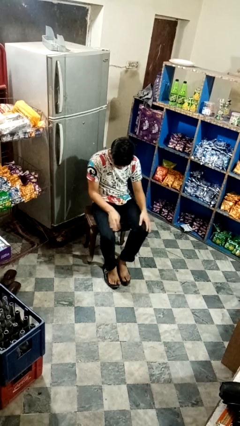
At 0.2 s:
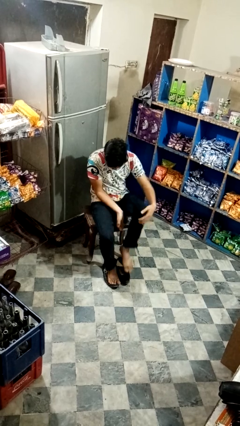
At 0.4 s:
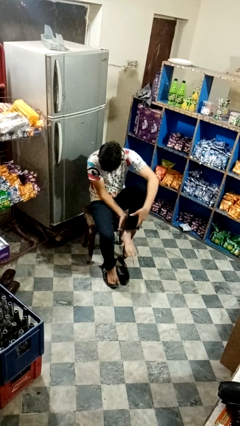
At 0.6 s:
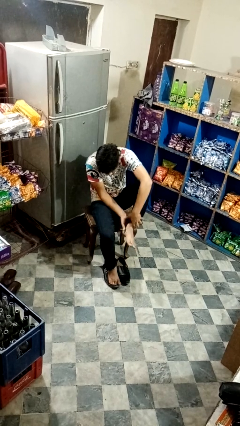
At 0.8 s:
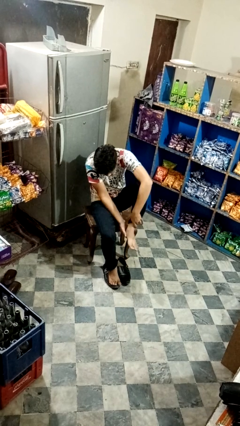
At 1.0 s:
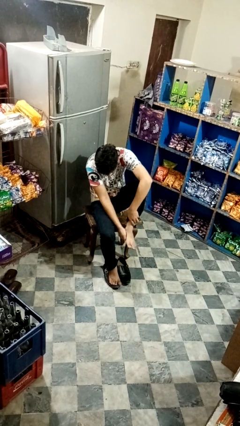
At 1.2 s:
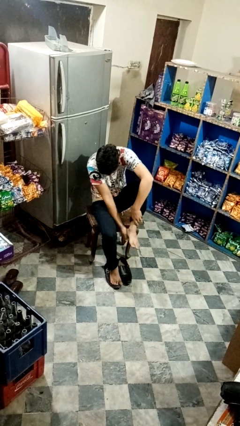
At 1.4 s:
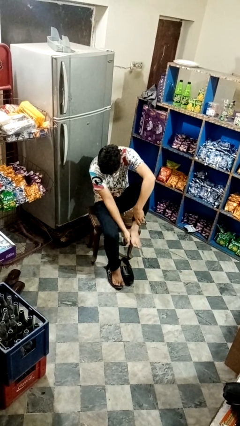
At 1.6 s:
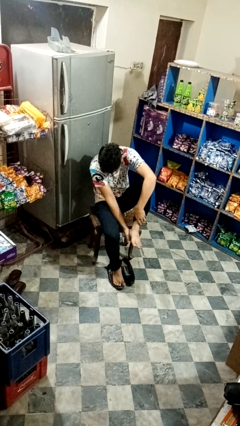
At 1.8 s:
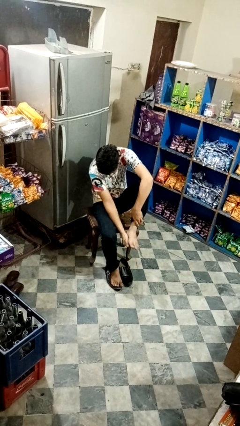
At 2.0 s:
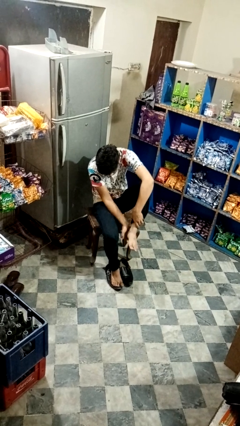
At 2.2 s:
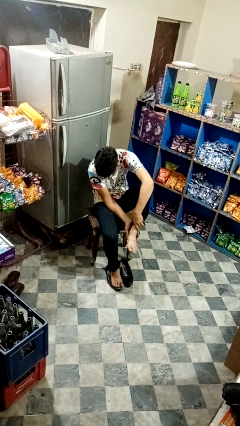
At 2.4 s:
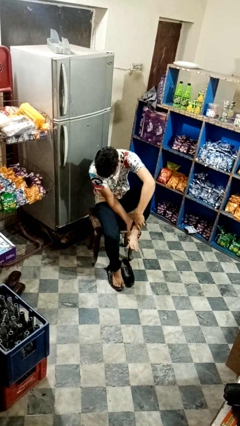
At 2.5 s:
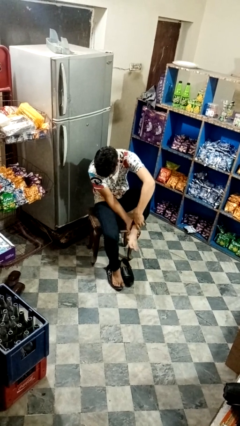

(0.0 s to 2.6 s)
person rubs foot

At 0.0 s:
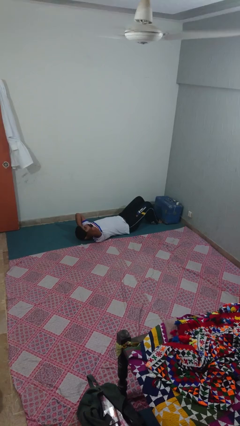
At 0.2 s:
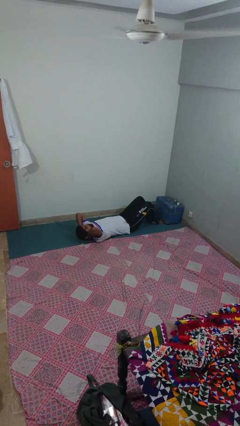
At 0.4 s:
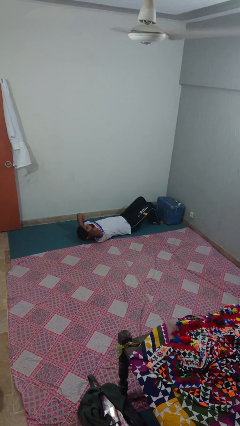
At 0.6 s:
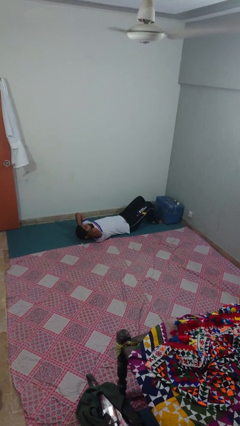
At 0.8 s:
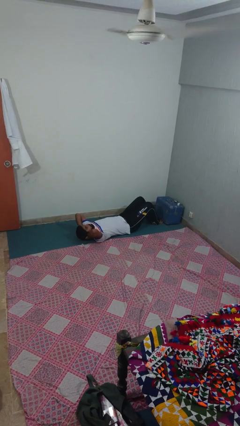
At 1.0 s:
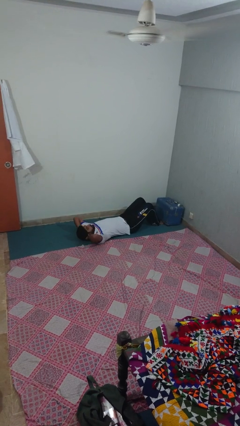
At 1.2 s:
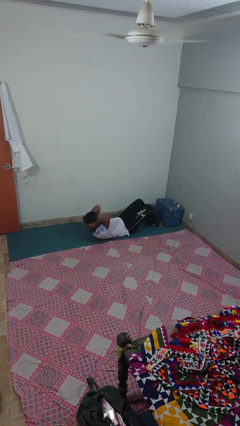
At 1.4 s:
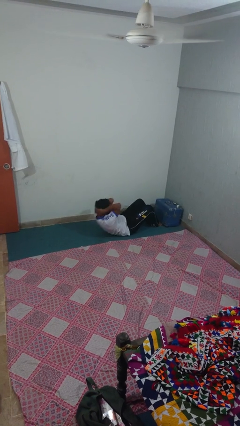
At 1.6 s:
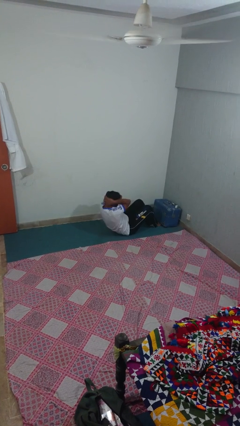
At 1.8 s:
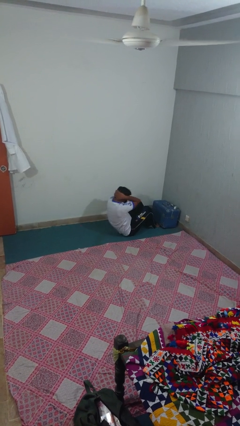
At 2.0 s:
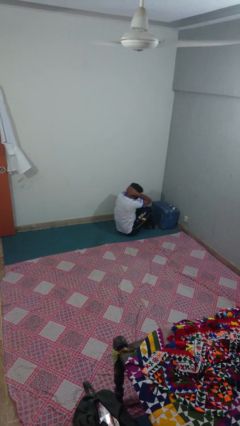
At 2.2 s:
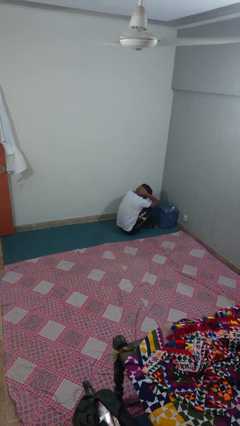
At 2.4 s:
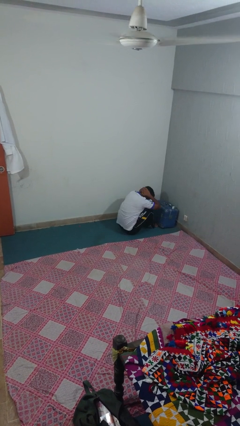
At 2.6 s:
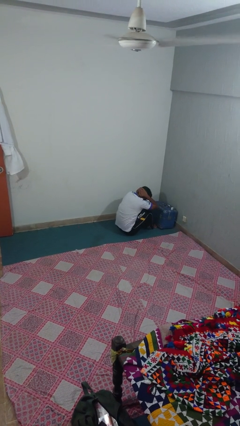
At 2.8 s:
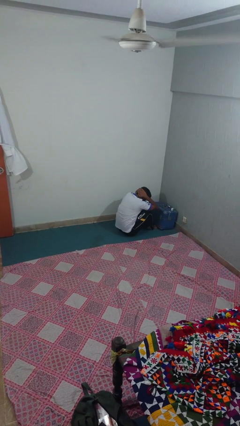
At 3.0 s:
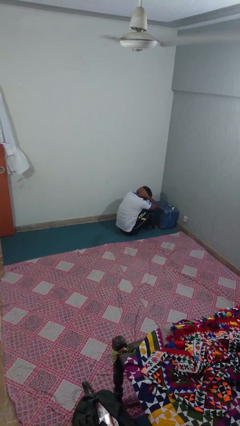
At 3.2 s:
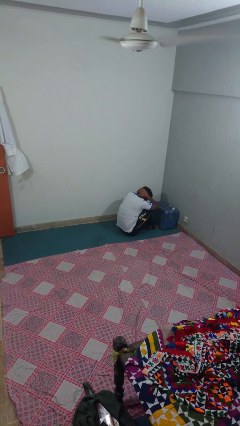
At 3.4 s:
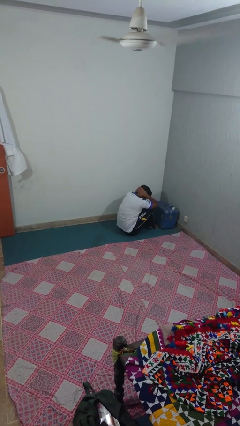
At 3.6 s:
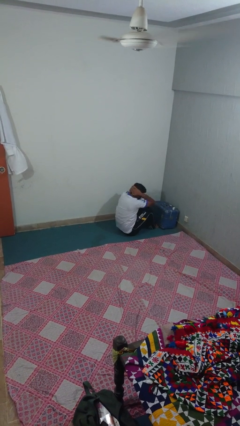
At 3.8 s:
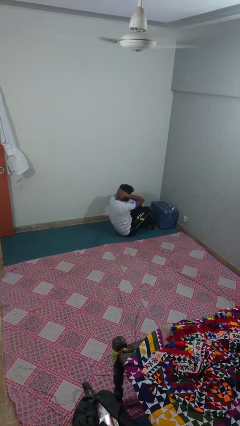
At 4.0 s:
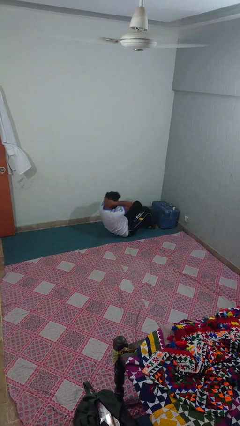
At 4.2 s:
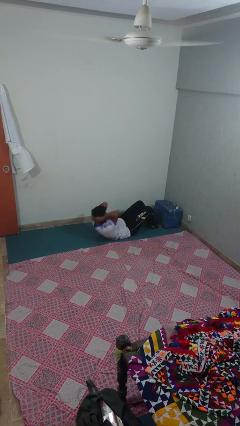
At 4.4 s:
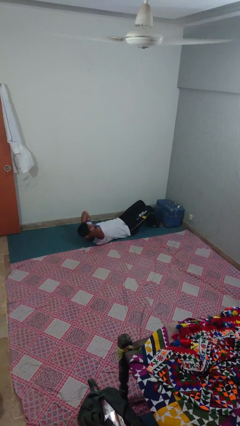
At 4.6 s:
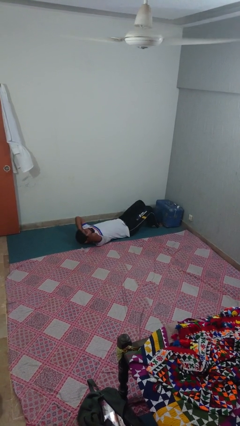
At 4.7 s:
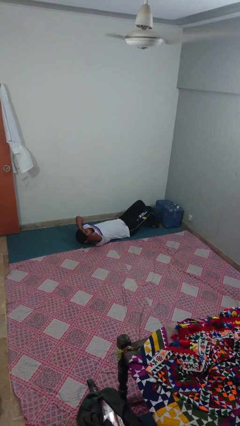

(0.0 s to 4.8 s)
person exercises with situp

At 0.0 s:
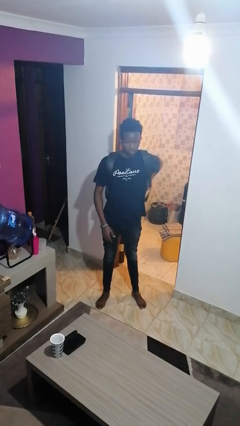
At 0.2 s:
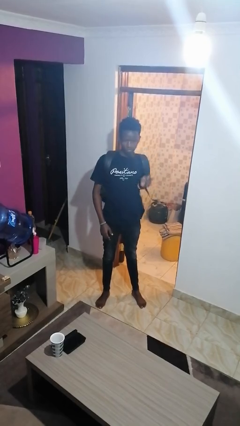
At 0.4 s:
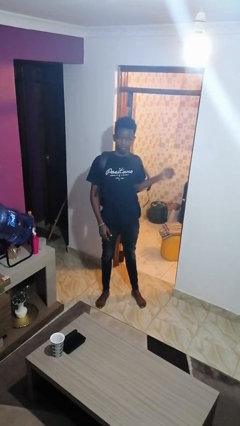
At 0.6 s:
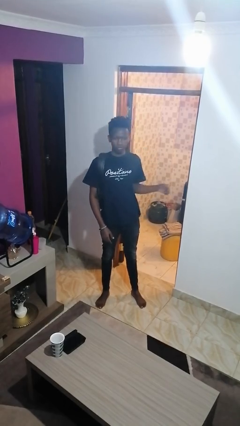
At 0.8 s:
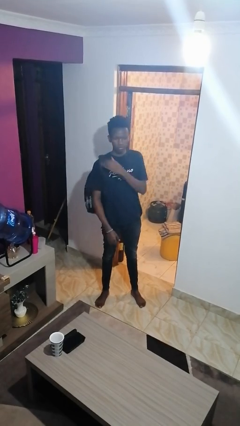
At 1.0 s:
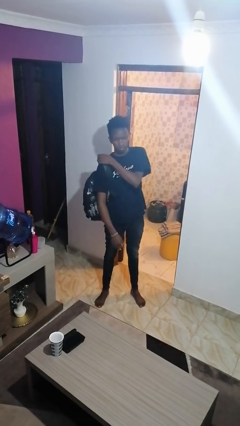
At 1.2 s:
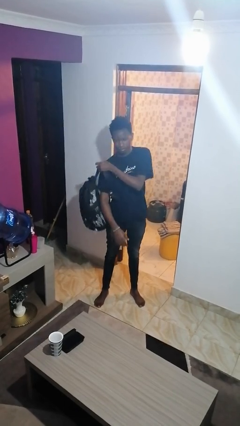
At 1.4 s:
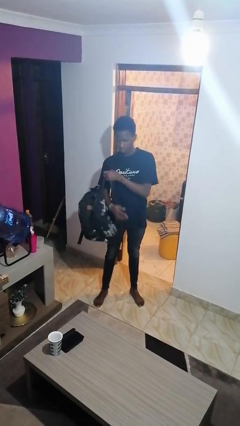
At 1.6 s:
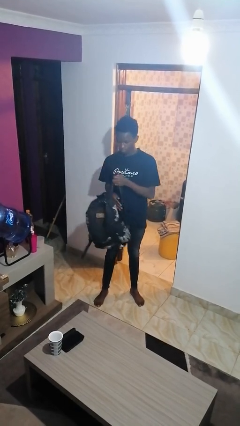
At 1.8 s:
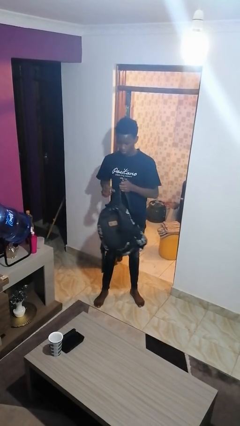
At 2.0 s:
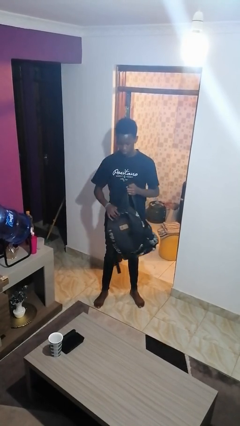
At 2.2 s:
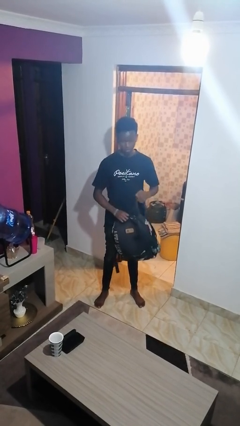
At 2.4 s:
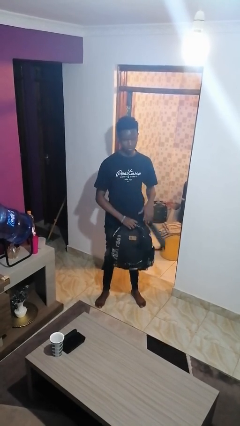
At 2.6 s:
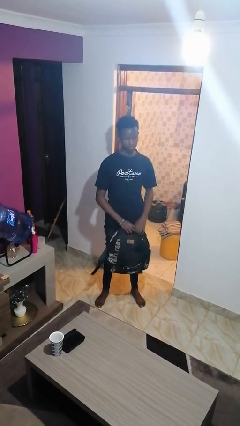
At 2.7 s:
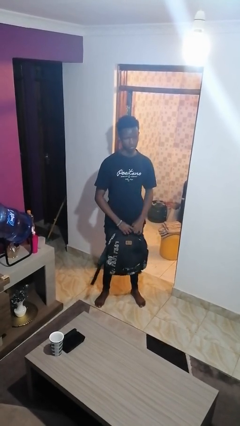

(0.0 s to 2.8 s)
person takes off backpack

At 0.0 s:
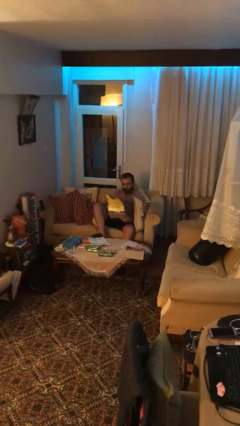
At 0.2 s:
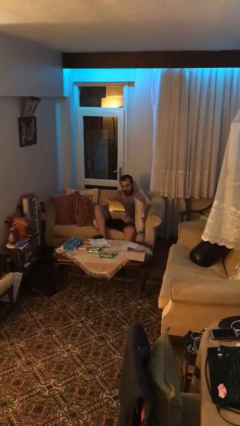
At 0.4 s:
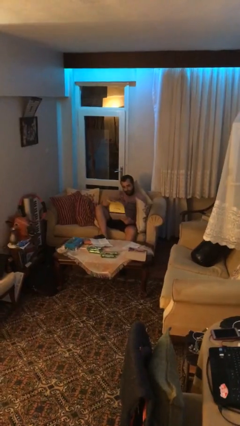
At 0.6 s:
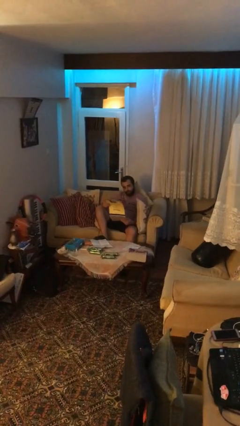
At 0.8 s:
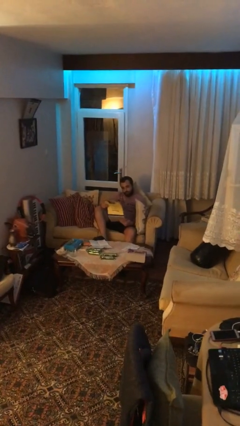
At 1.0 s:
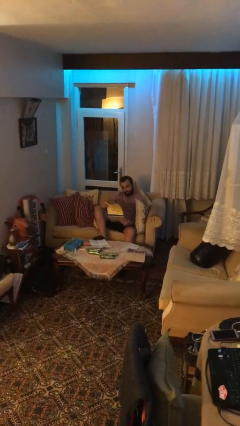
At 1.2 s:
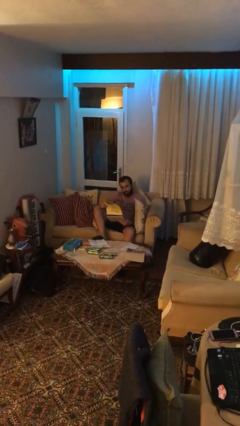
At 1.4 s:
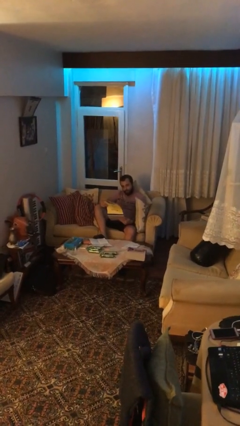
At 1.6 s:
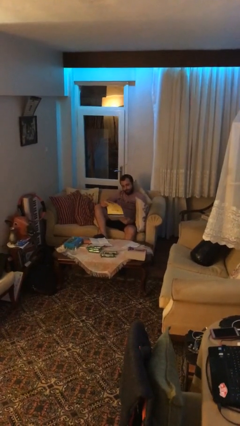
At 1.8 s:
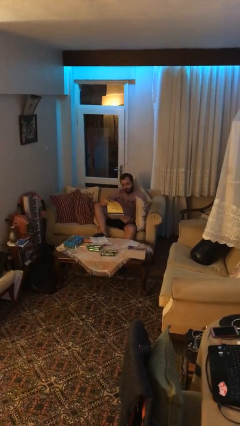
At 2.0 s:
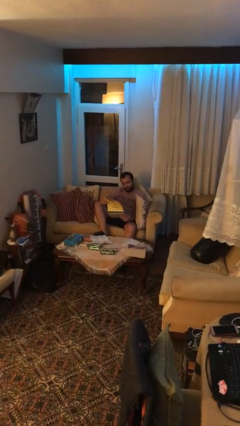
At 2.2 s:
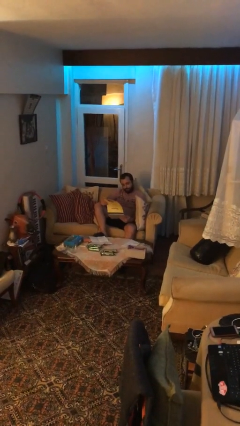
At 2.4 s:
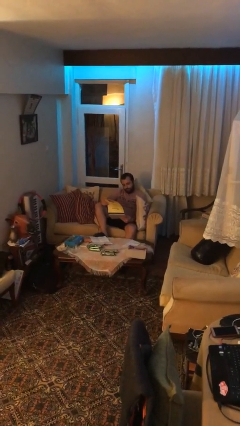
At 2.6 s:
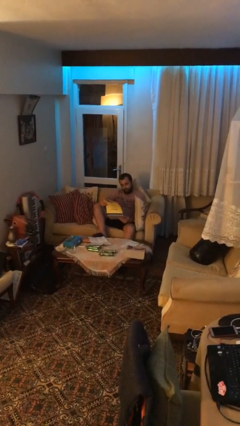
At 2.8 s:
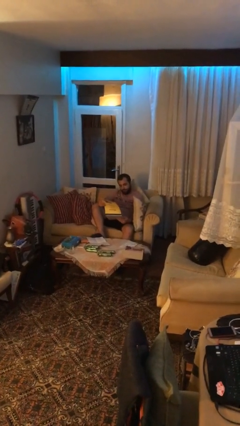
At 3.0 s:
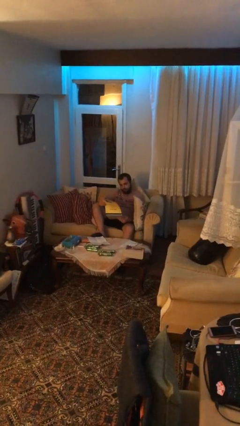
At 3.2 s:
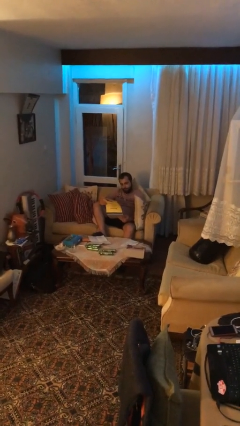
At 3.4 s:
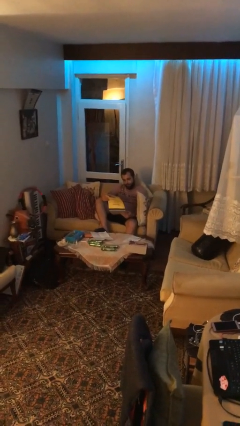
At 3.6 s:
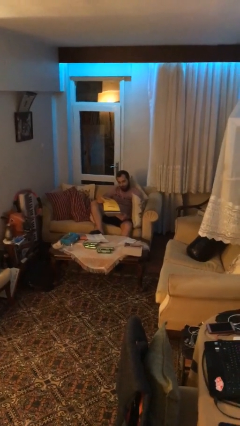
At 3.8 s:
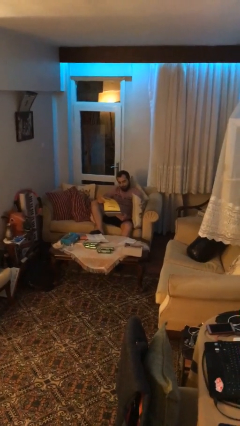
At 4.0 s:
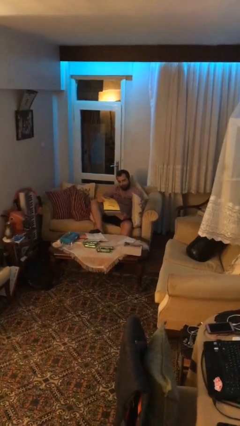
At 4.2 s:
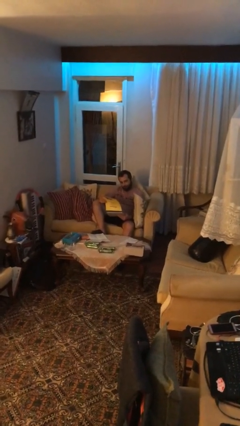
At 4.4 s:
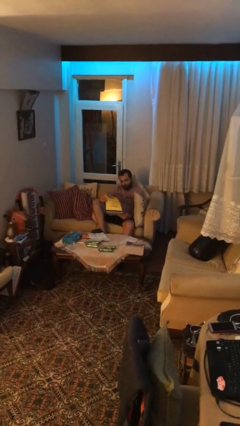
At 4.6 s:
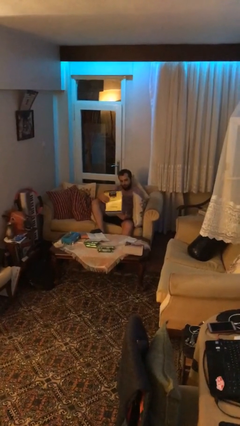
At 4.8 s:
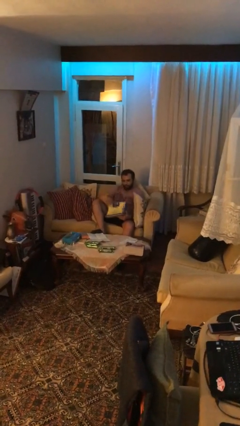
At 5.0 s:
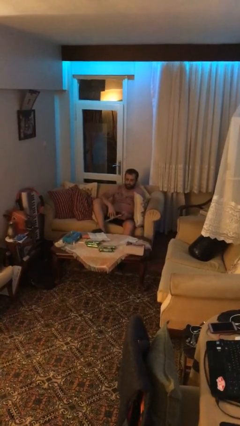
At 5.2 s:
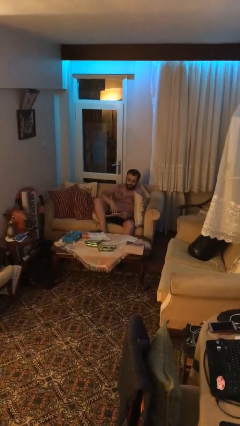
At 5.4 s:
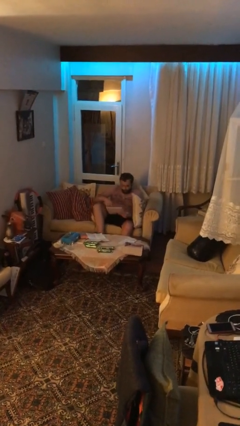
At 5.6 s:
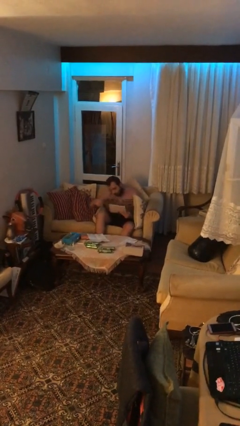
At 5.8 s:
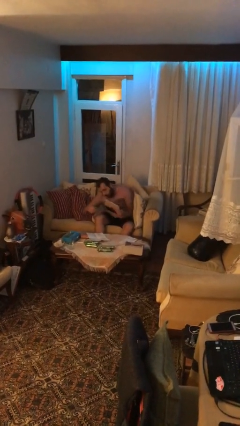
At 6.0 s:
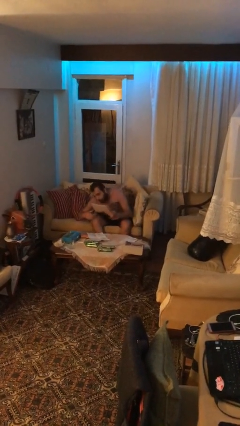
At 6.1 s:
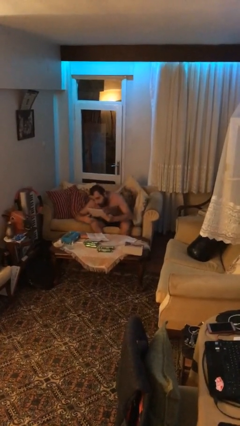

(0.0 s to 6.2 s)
person reads document

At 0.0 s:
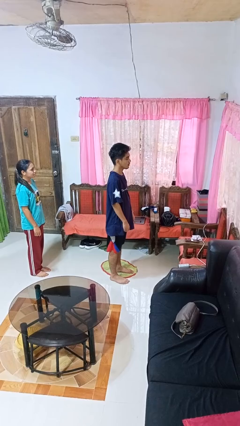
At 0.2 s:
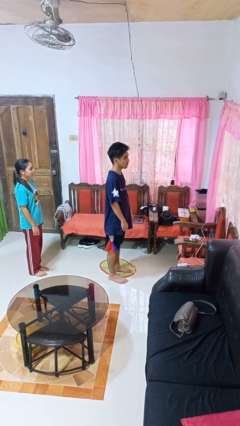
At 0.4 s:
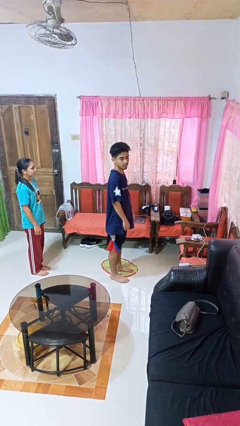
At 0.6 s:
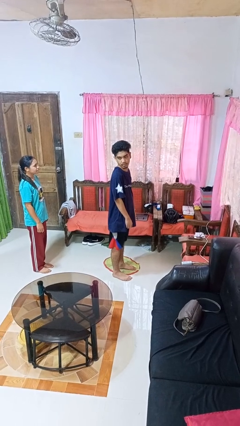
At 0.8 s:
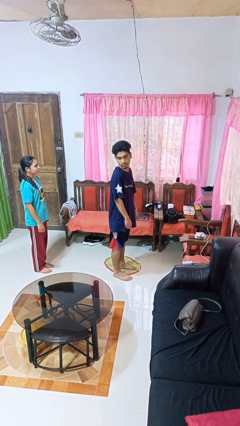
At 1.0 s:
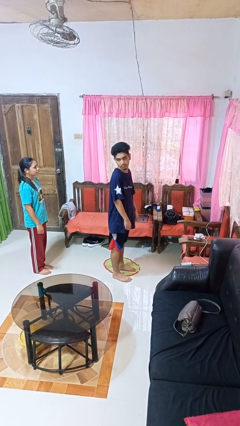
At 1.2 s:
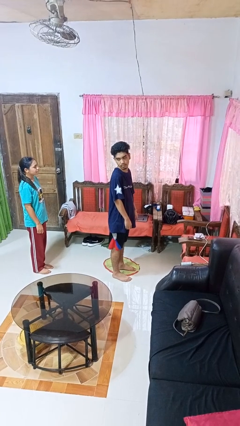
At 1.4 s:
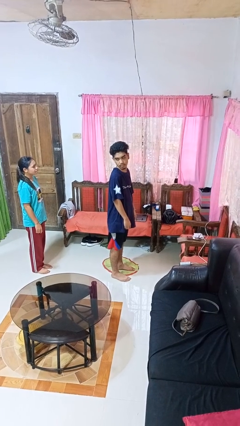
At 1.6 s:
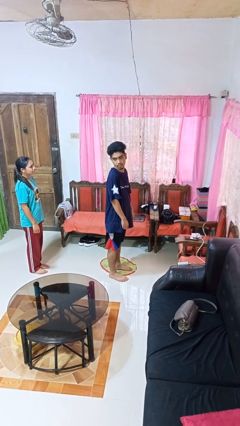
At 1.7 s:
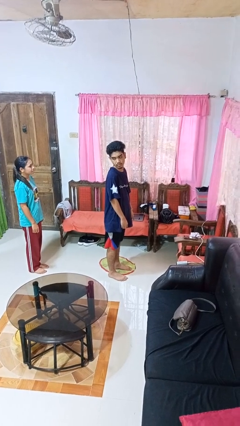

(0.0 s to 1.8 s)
person looks over shoulder
